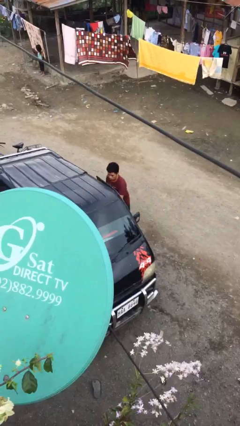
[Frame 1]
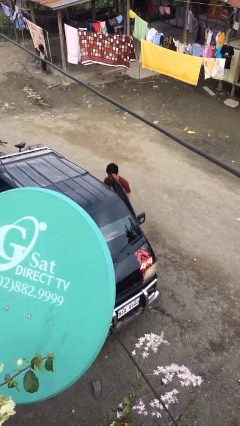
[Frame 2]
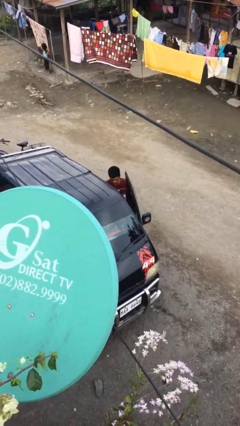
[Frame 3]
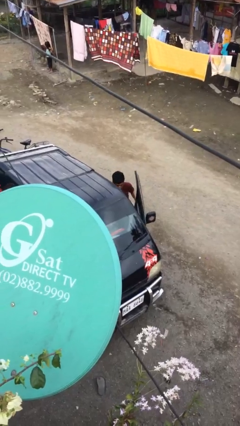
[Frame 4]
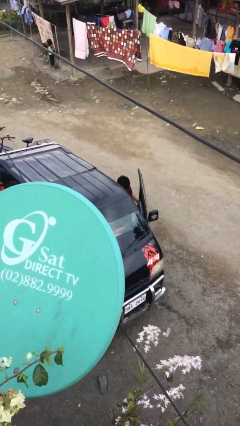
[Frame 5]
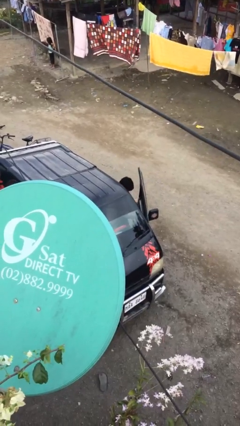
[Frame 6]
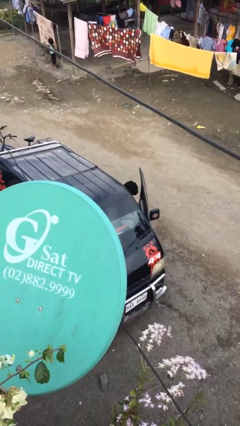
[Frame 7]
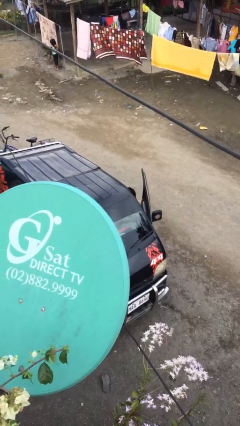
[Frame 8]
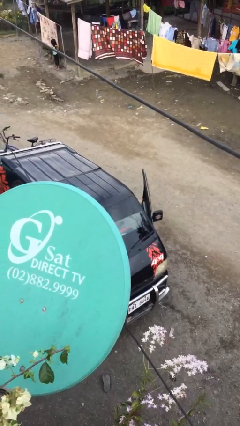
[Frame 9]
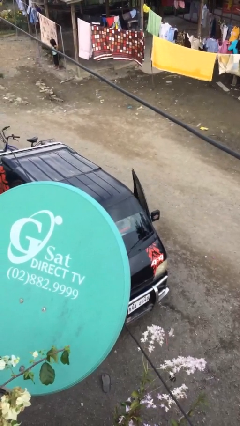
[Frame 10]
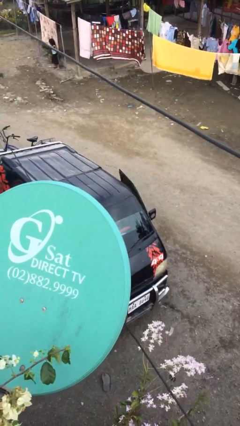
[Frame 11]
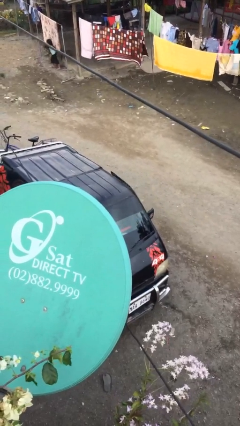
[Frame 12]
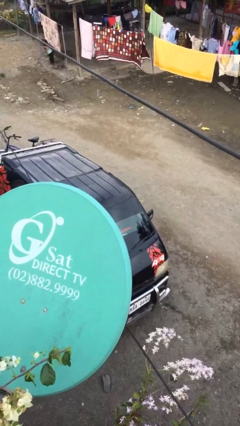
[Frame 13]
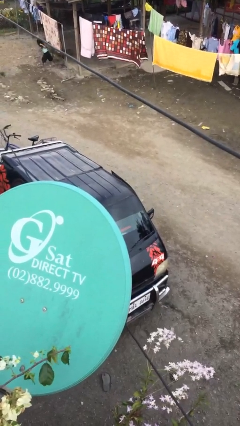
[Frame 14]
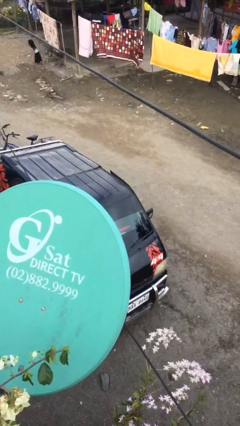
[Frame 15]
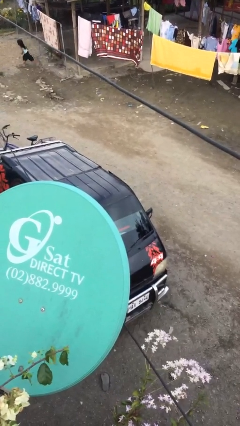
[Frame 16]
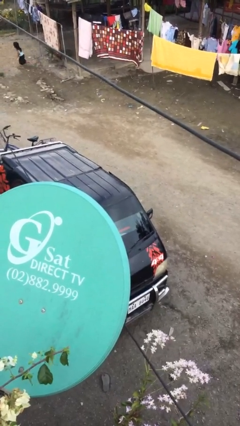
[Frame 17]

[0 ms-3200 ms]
person enters car

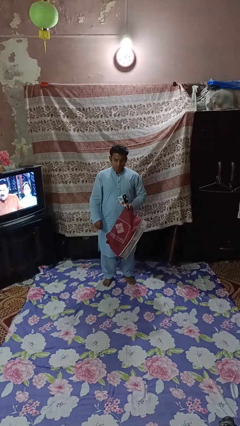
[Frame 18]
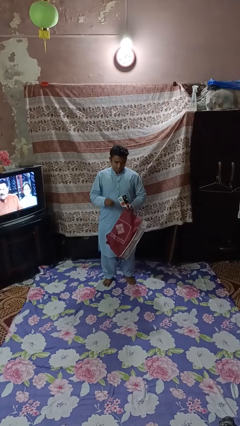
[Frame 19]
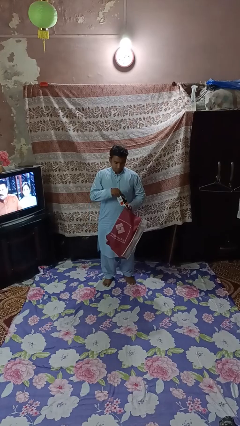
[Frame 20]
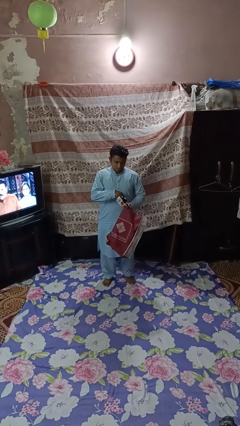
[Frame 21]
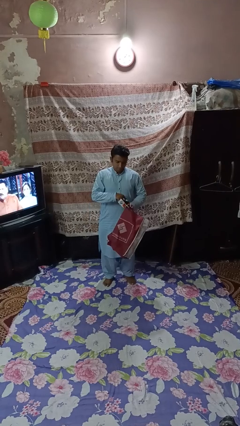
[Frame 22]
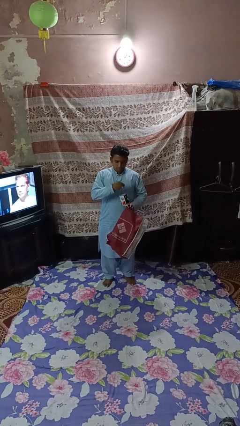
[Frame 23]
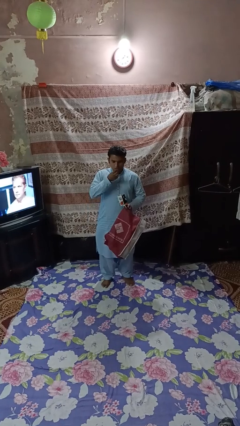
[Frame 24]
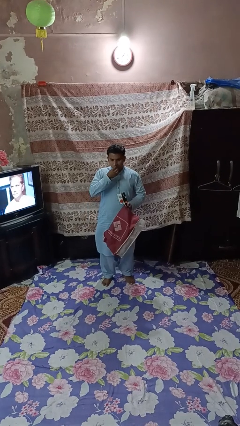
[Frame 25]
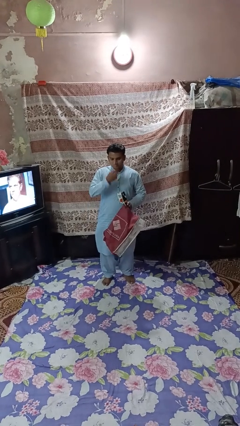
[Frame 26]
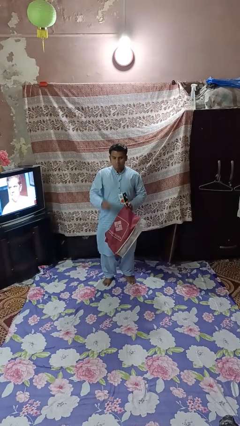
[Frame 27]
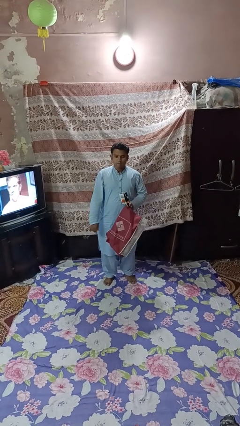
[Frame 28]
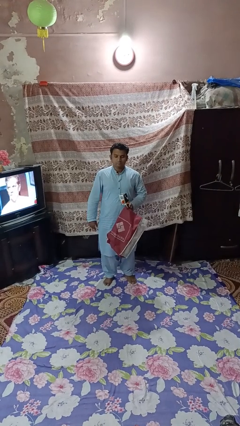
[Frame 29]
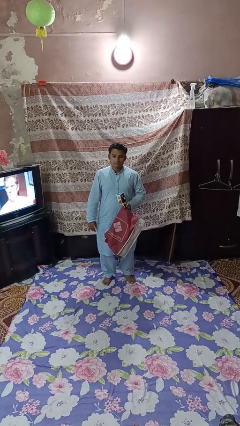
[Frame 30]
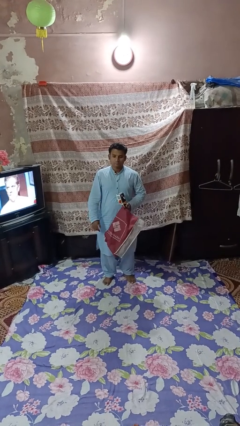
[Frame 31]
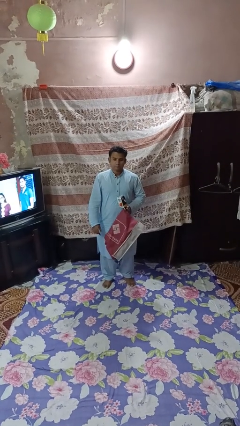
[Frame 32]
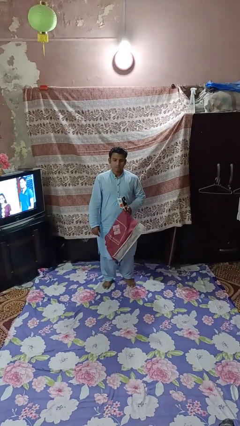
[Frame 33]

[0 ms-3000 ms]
person eats snack from bag

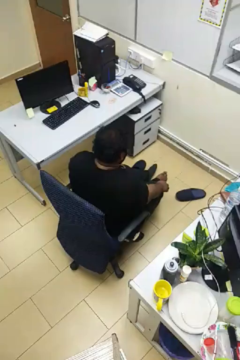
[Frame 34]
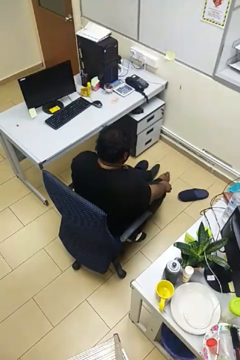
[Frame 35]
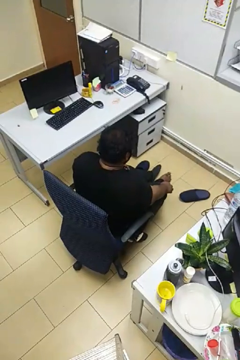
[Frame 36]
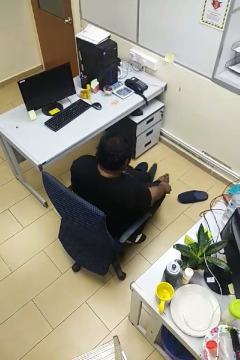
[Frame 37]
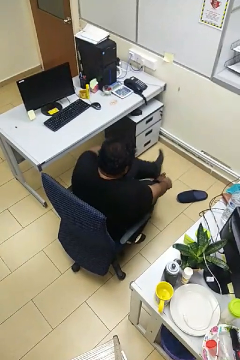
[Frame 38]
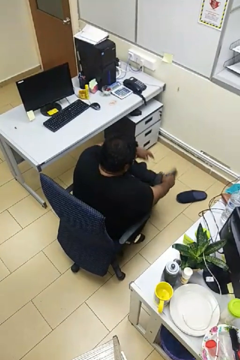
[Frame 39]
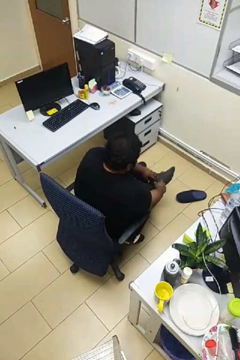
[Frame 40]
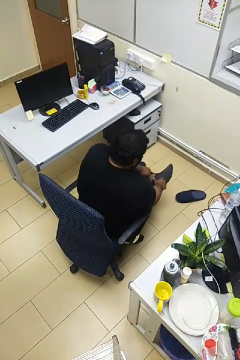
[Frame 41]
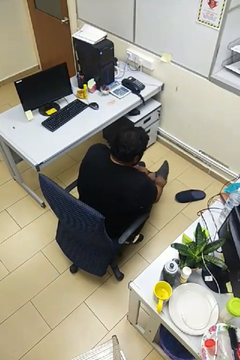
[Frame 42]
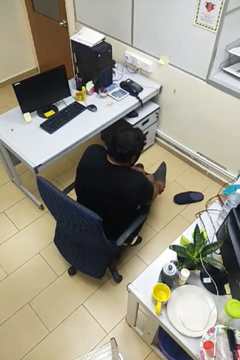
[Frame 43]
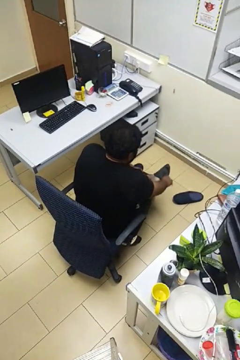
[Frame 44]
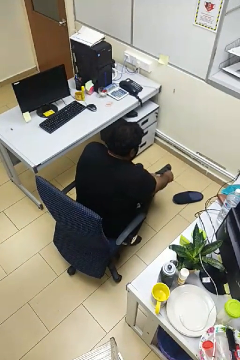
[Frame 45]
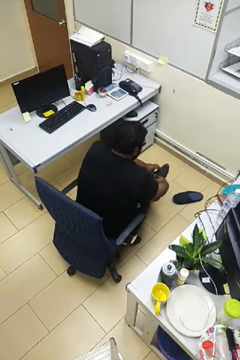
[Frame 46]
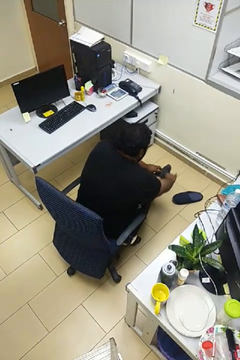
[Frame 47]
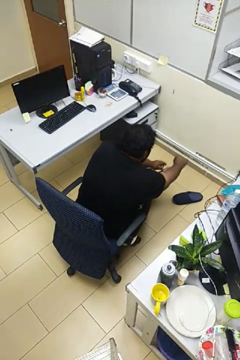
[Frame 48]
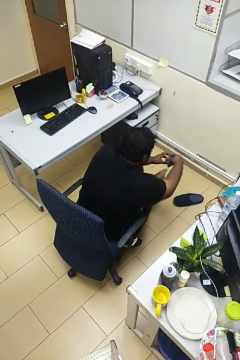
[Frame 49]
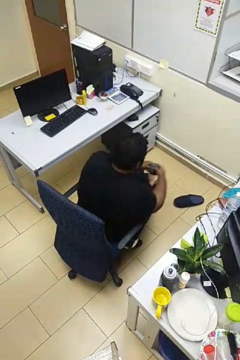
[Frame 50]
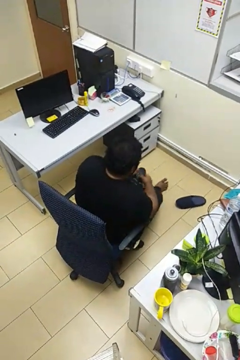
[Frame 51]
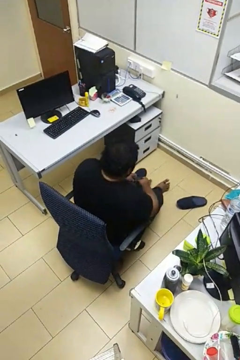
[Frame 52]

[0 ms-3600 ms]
person takes off socks

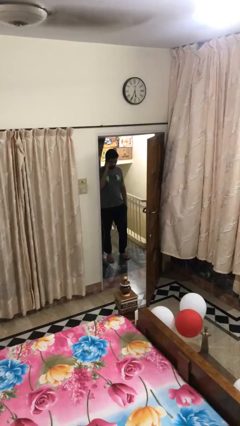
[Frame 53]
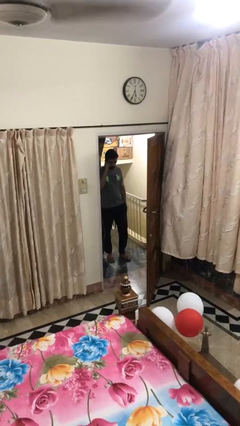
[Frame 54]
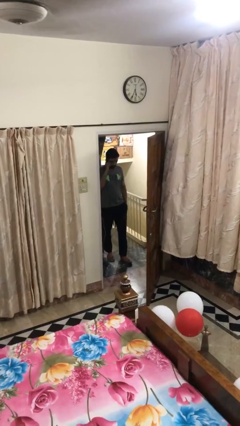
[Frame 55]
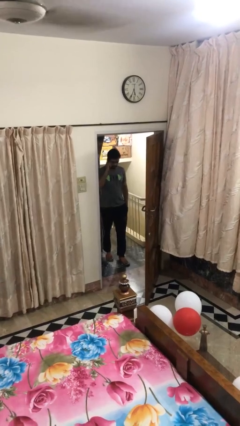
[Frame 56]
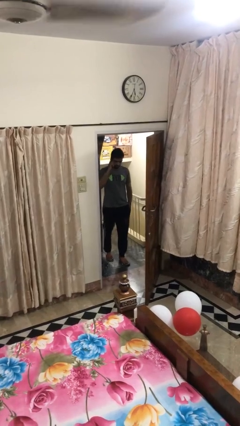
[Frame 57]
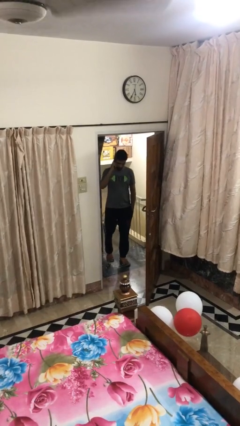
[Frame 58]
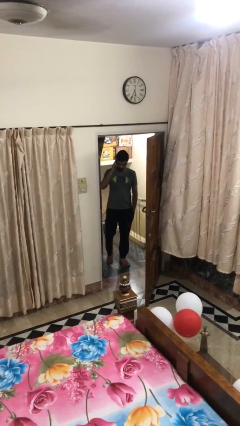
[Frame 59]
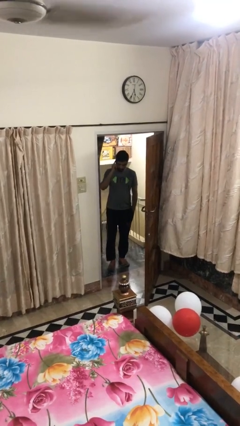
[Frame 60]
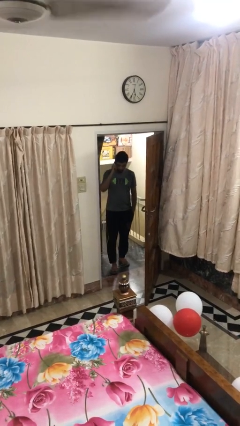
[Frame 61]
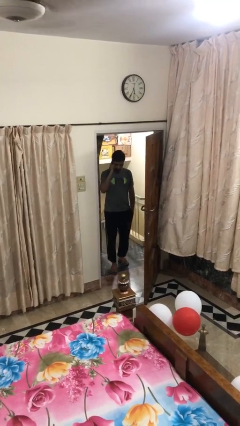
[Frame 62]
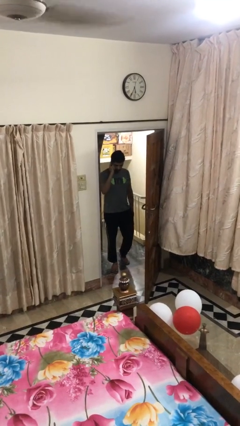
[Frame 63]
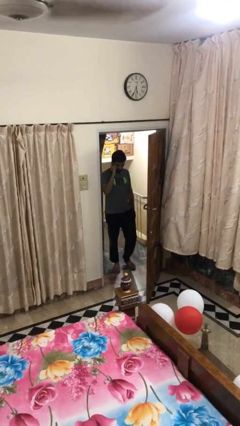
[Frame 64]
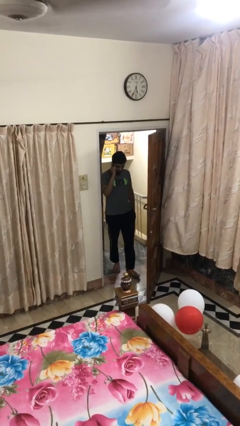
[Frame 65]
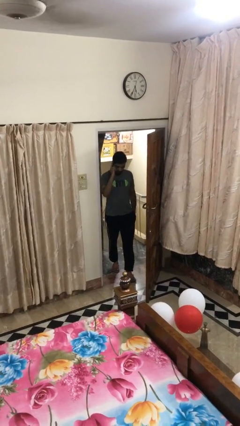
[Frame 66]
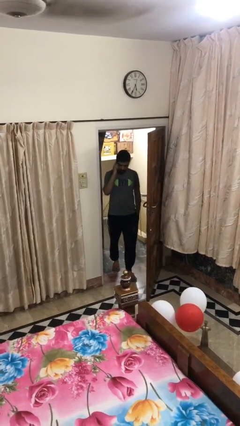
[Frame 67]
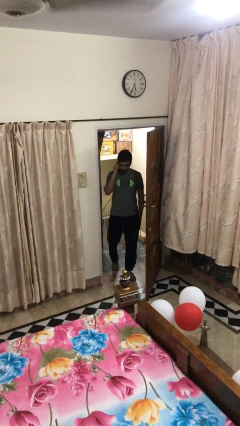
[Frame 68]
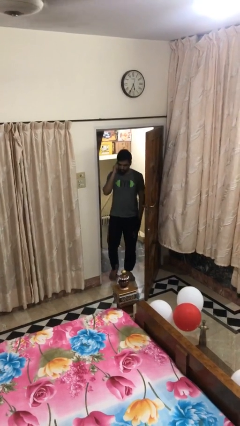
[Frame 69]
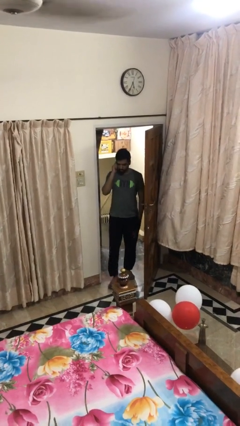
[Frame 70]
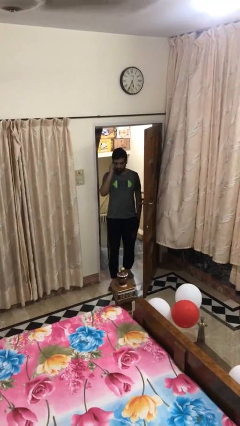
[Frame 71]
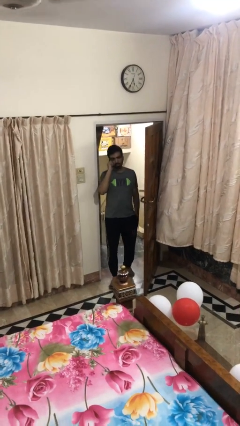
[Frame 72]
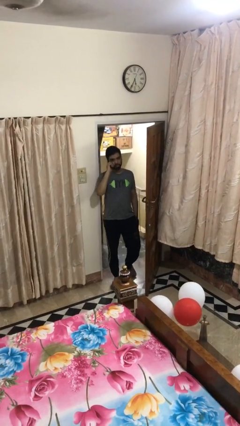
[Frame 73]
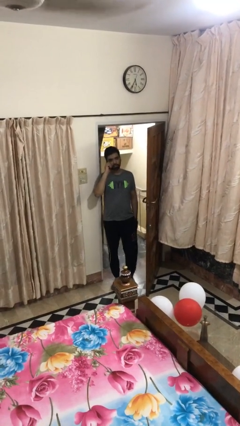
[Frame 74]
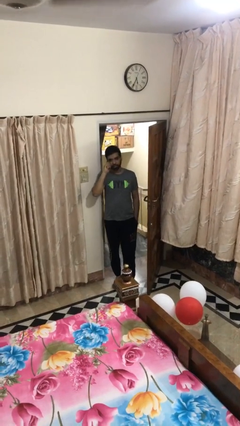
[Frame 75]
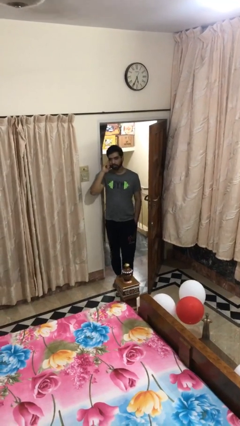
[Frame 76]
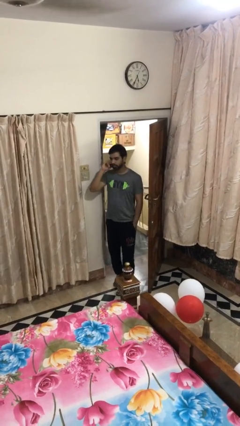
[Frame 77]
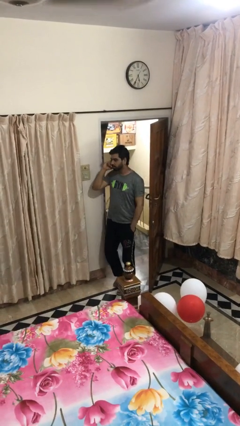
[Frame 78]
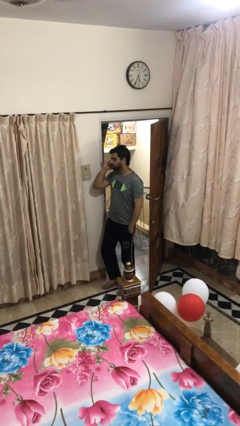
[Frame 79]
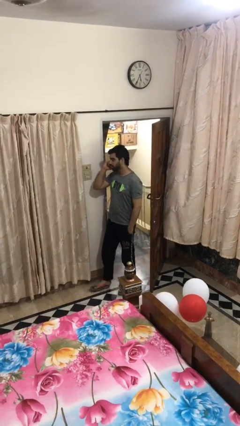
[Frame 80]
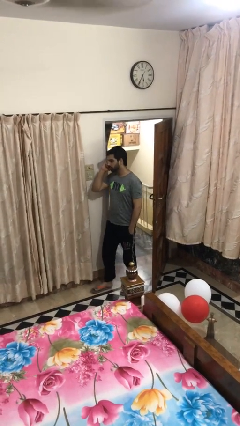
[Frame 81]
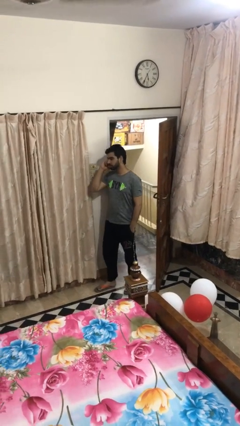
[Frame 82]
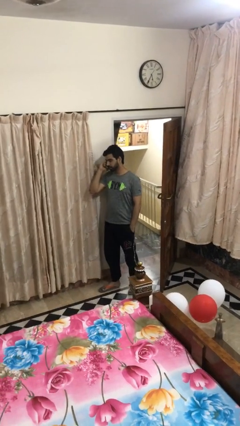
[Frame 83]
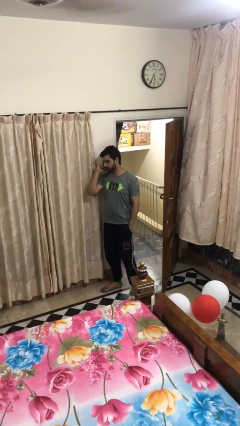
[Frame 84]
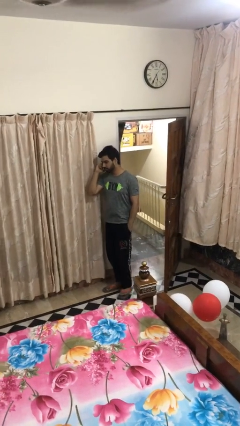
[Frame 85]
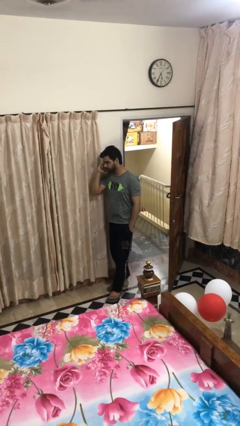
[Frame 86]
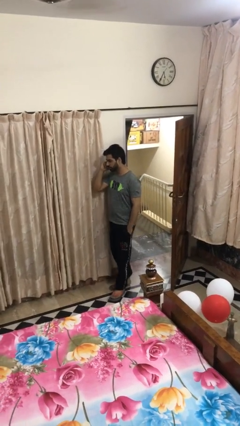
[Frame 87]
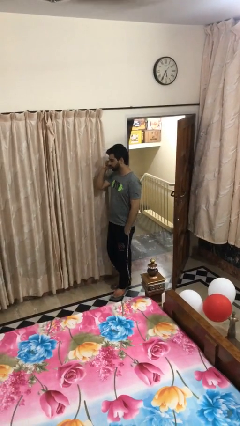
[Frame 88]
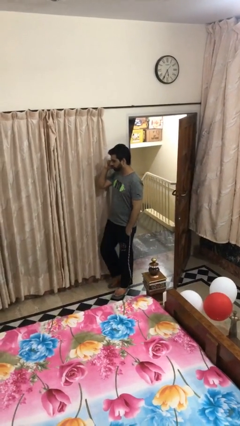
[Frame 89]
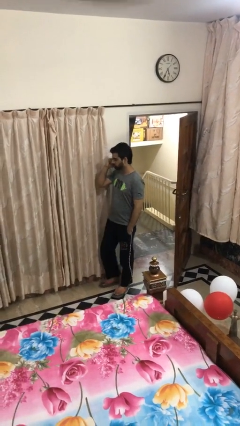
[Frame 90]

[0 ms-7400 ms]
person enters scene through structure

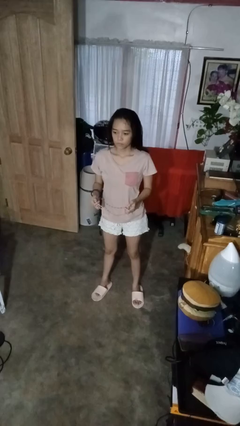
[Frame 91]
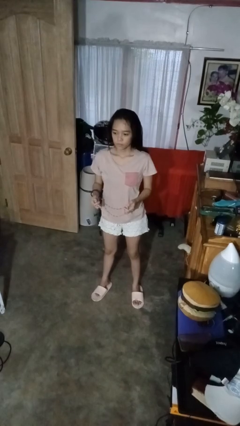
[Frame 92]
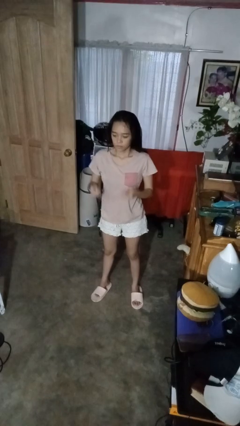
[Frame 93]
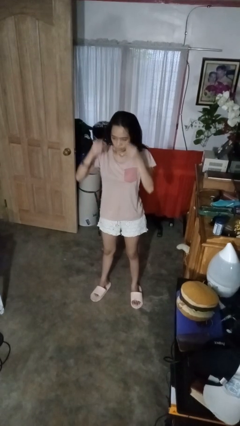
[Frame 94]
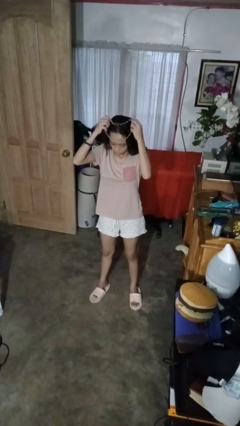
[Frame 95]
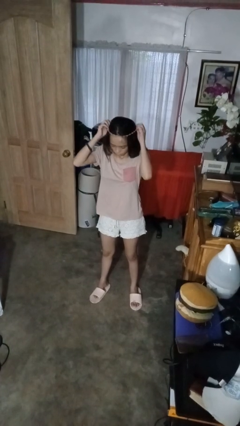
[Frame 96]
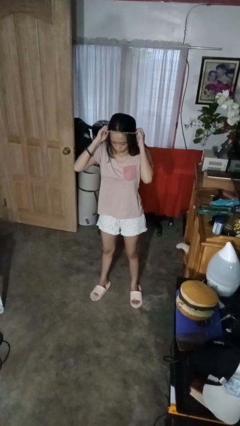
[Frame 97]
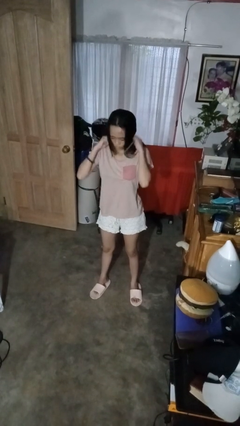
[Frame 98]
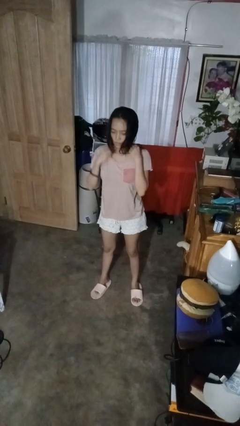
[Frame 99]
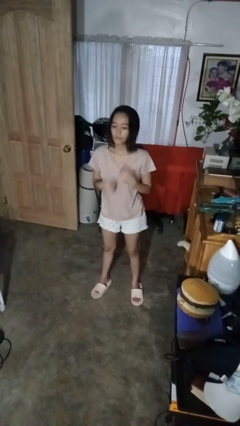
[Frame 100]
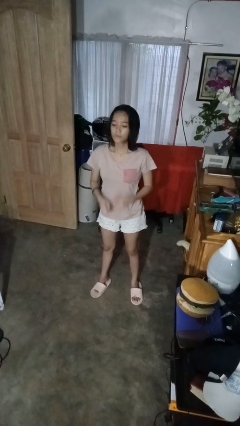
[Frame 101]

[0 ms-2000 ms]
person puts on necklace
